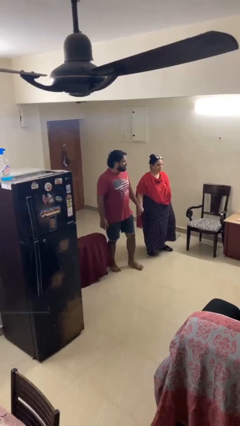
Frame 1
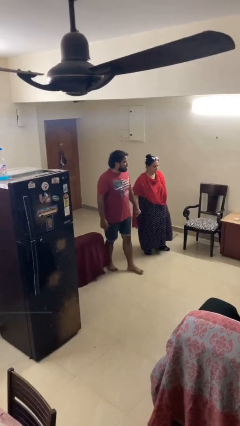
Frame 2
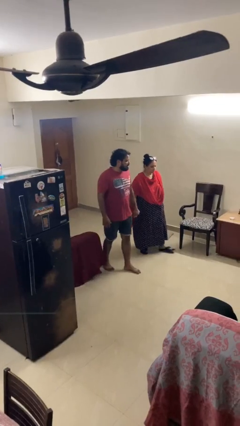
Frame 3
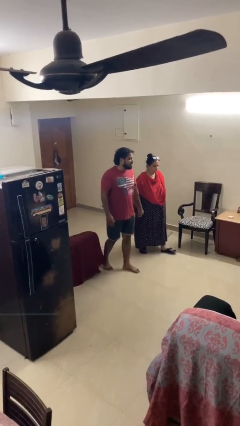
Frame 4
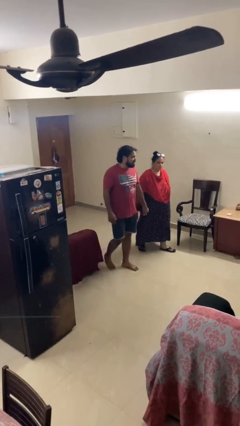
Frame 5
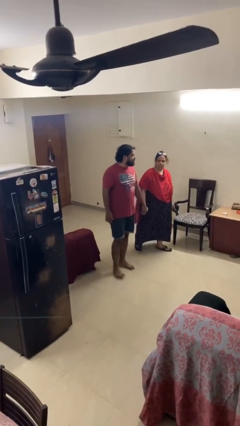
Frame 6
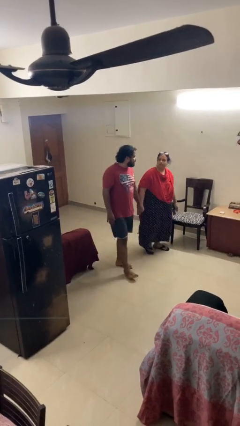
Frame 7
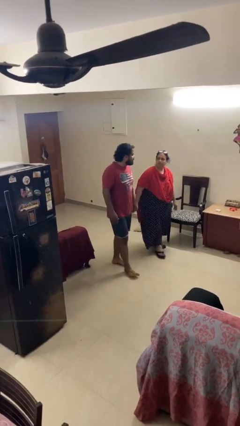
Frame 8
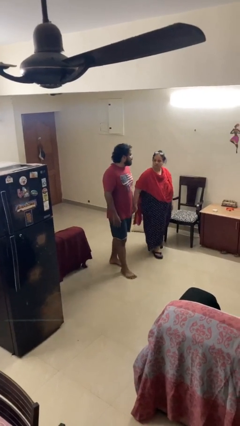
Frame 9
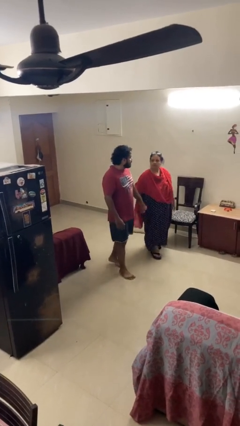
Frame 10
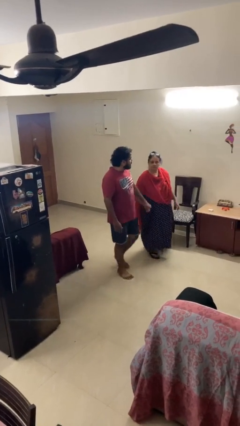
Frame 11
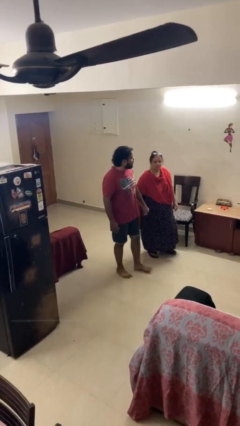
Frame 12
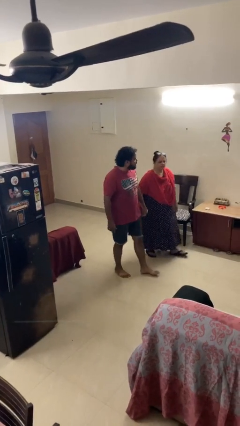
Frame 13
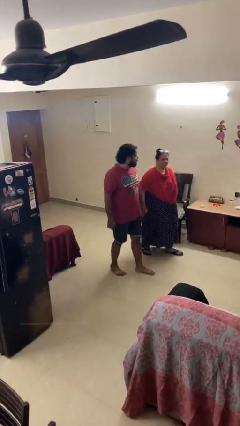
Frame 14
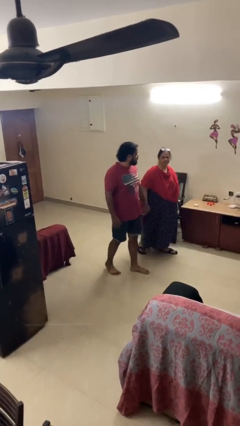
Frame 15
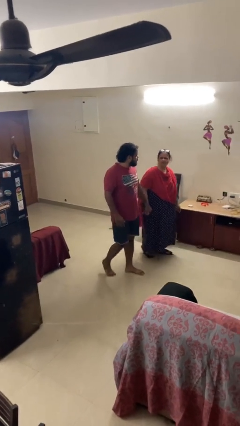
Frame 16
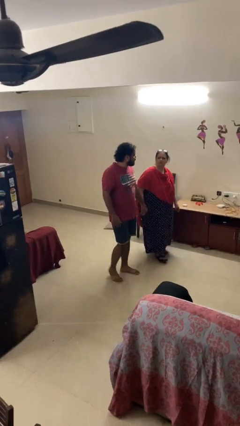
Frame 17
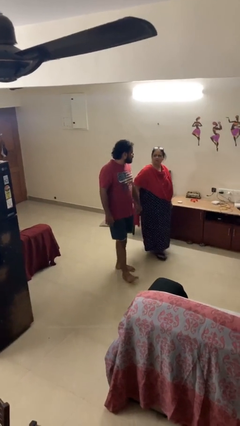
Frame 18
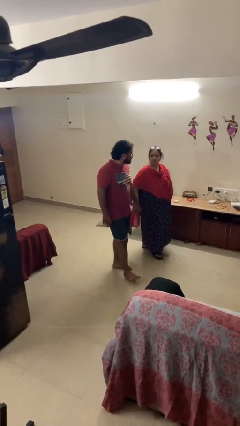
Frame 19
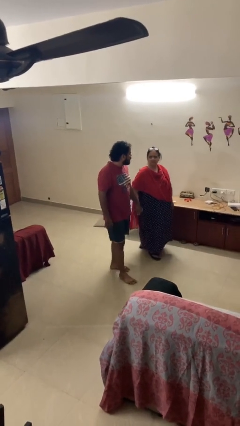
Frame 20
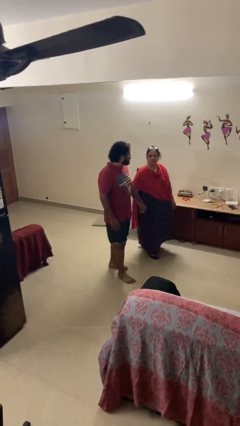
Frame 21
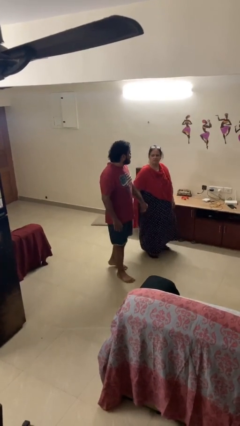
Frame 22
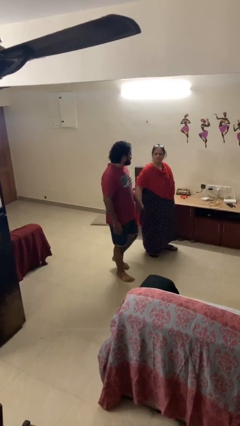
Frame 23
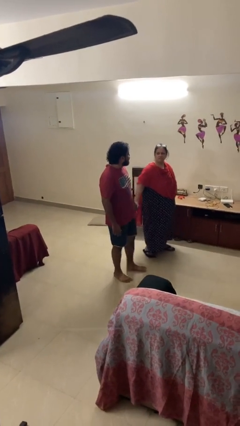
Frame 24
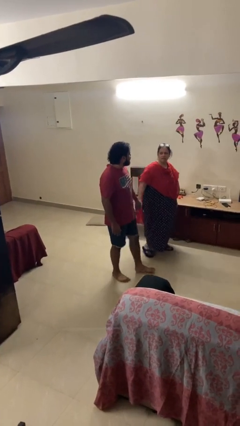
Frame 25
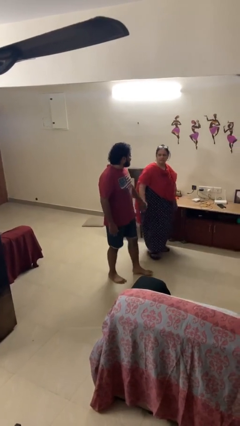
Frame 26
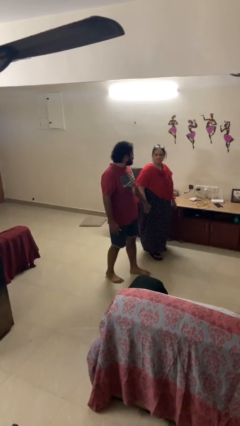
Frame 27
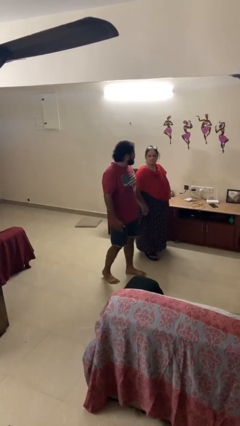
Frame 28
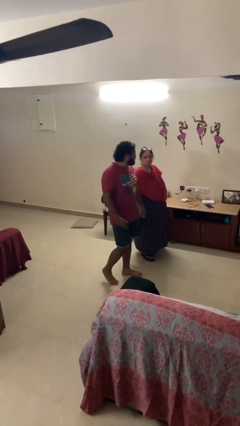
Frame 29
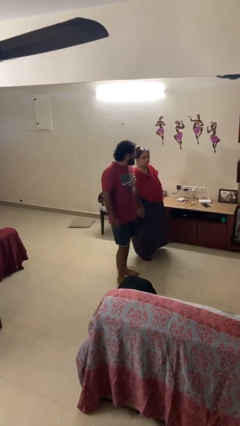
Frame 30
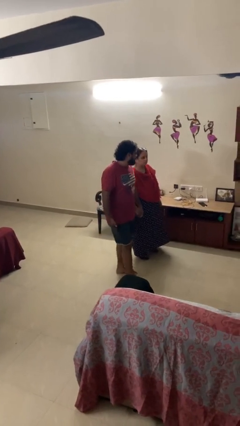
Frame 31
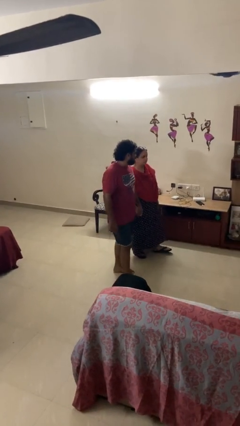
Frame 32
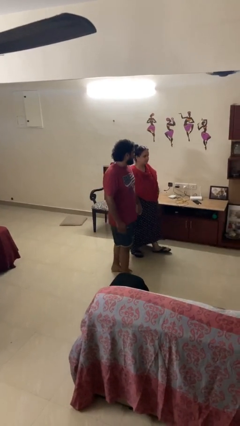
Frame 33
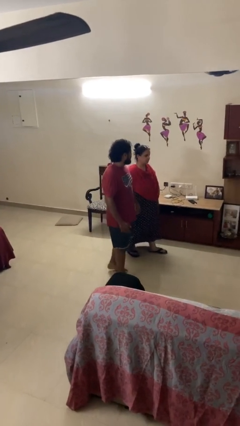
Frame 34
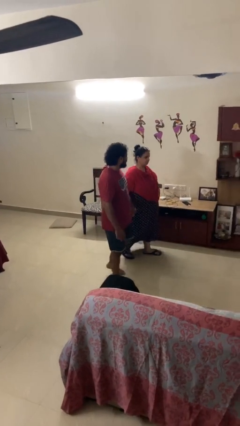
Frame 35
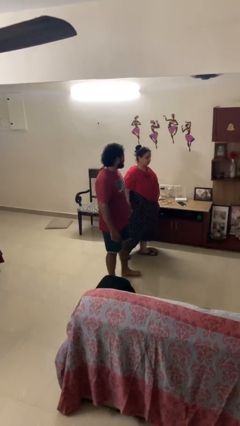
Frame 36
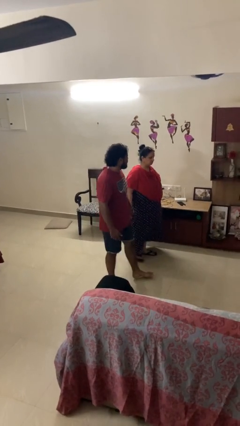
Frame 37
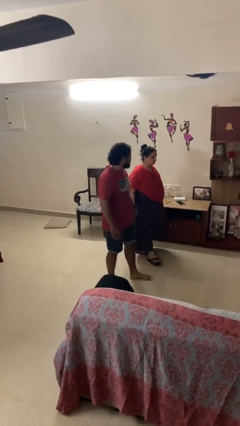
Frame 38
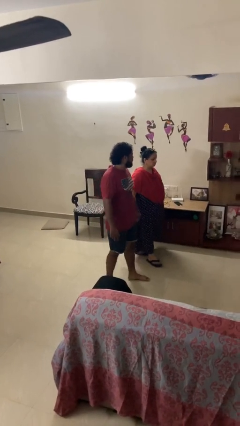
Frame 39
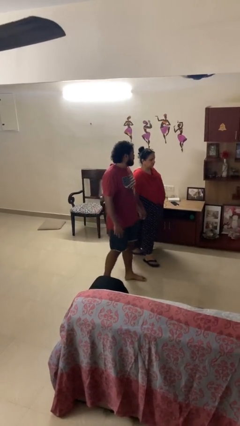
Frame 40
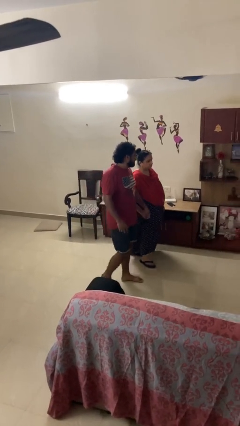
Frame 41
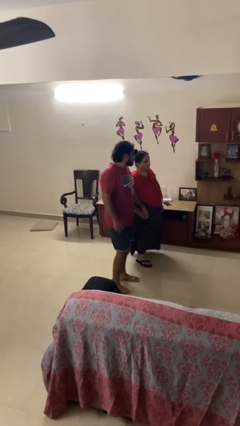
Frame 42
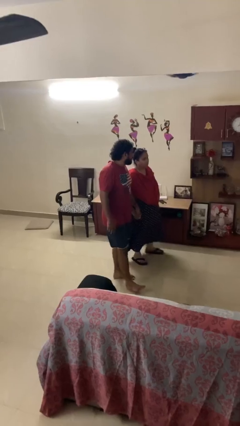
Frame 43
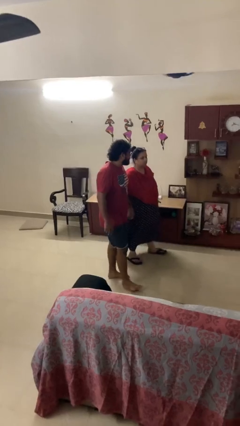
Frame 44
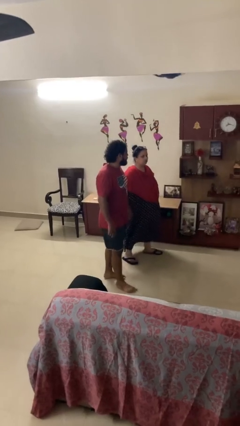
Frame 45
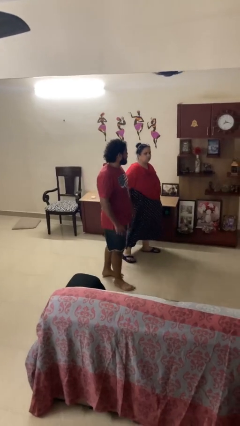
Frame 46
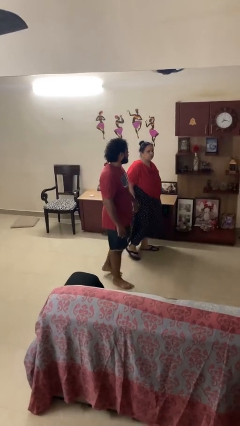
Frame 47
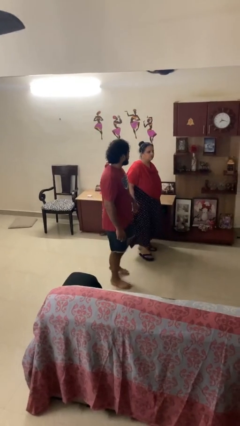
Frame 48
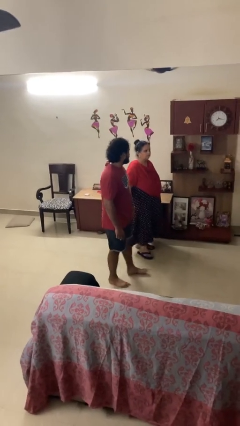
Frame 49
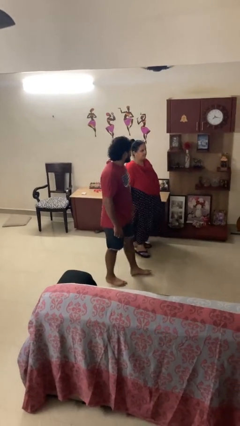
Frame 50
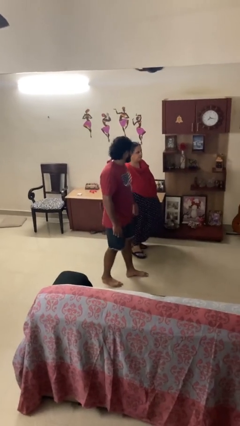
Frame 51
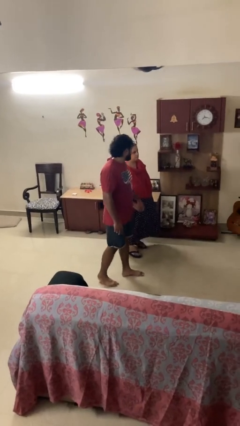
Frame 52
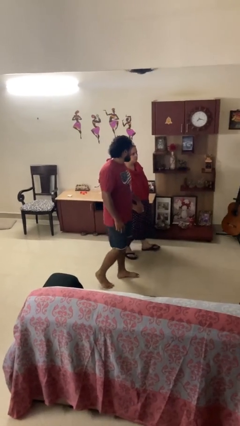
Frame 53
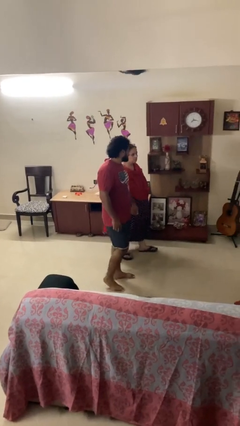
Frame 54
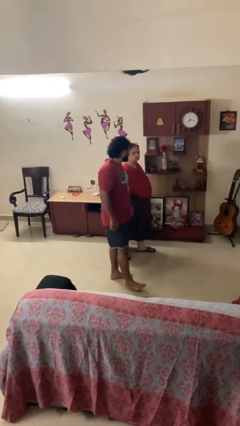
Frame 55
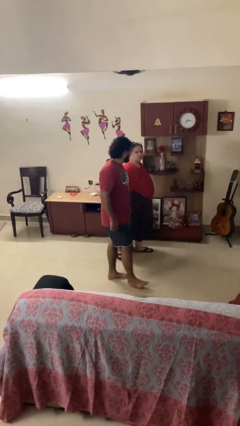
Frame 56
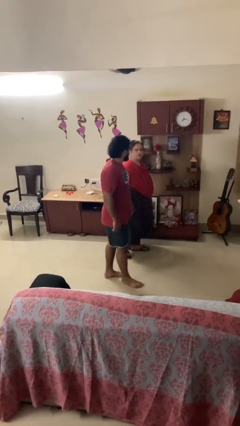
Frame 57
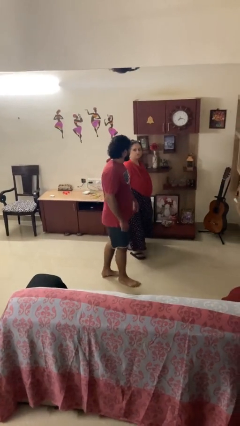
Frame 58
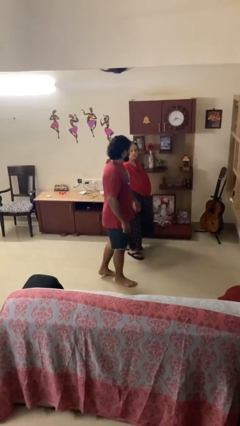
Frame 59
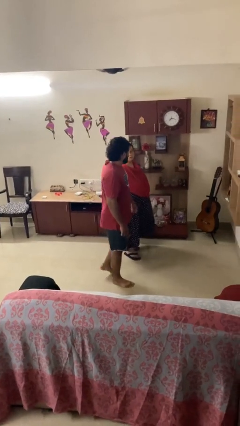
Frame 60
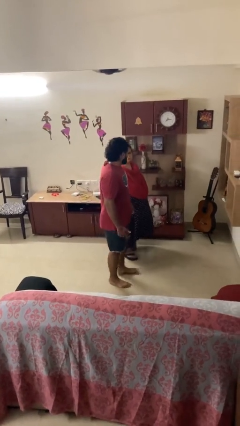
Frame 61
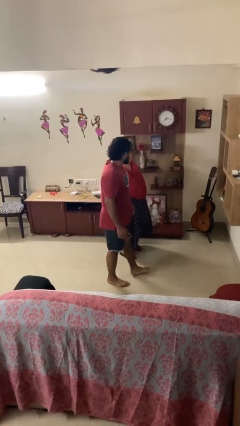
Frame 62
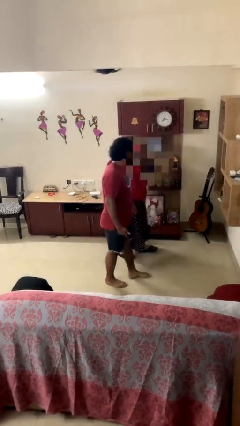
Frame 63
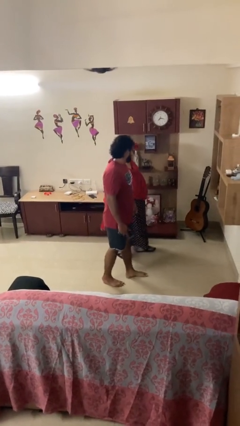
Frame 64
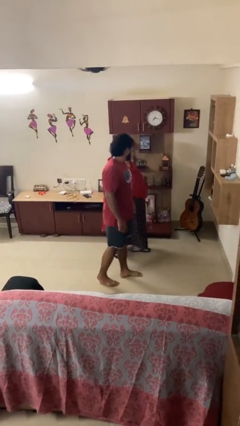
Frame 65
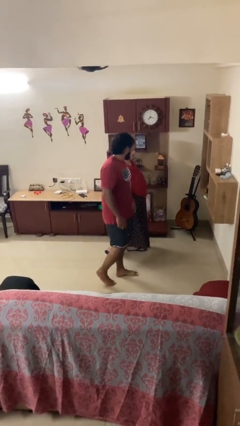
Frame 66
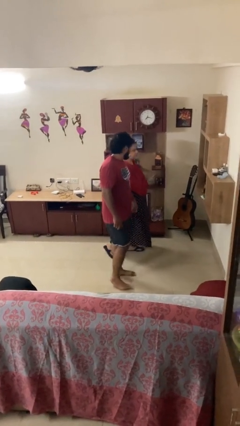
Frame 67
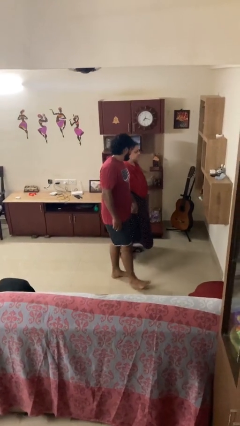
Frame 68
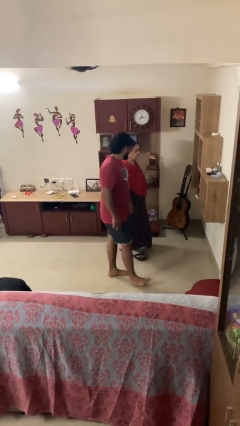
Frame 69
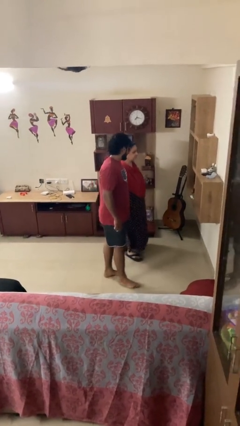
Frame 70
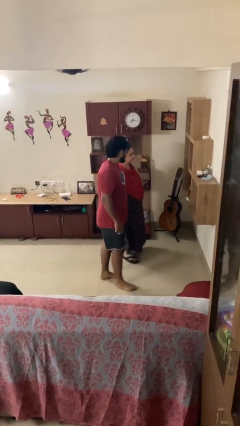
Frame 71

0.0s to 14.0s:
person holds hand

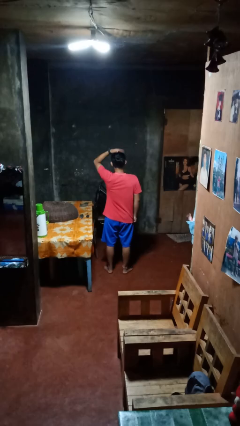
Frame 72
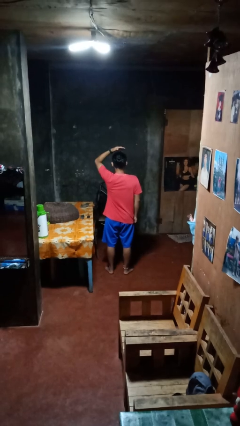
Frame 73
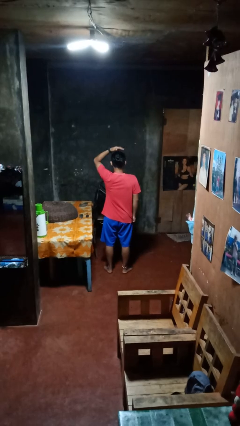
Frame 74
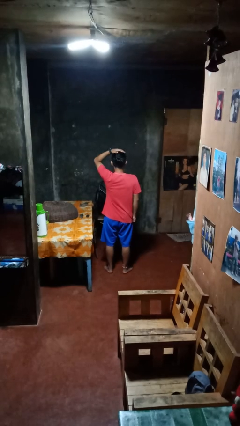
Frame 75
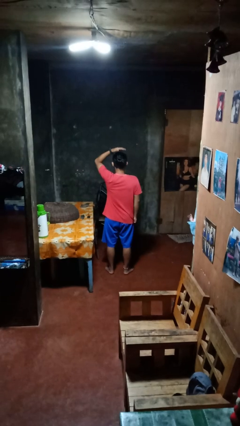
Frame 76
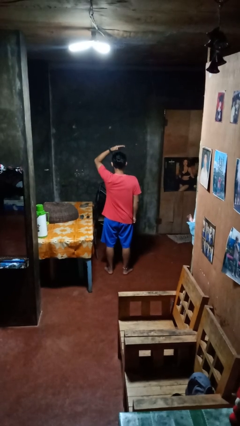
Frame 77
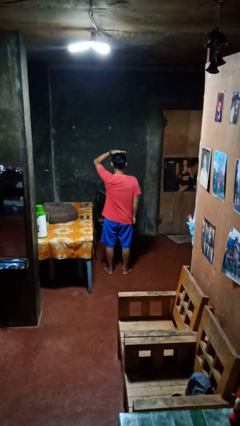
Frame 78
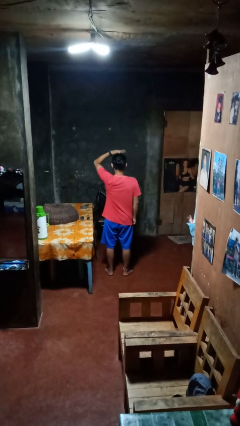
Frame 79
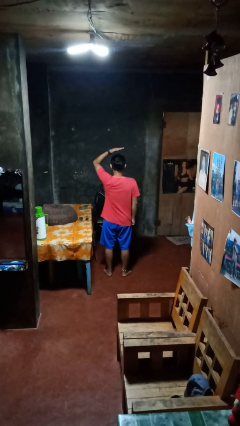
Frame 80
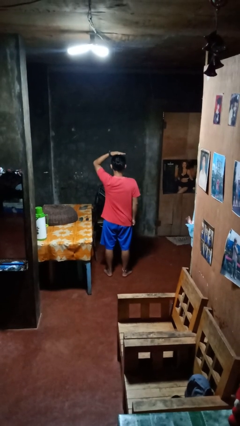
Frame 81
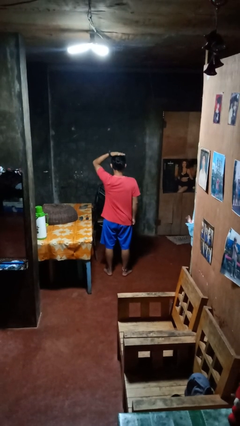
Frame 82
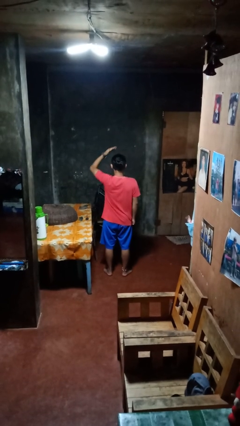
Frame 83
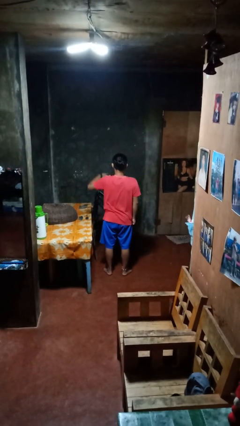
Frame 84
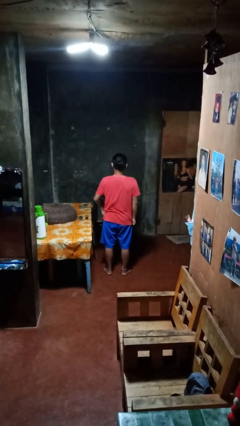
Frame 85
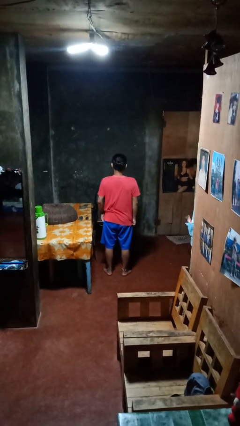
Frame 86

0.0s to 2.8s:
person pats head

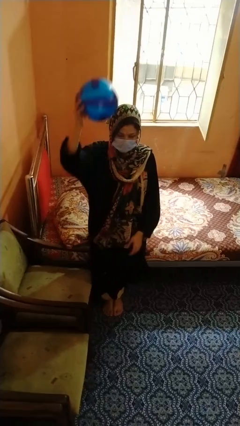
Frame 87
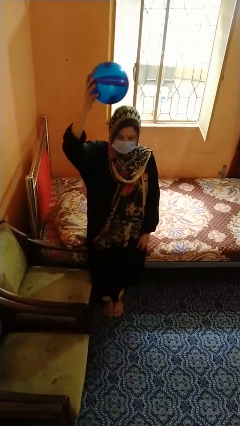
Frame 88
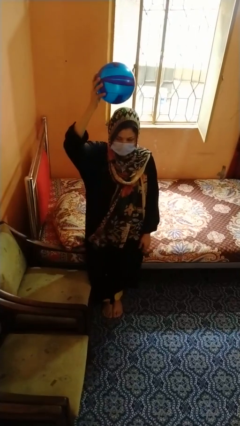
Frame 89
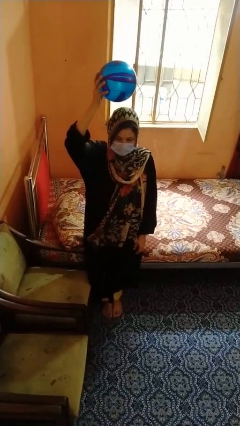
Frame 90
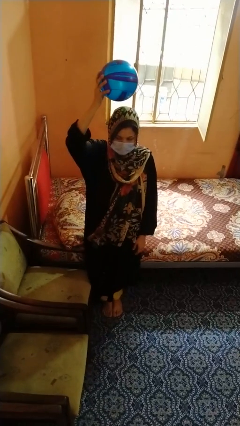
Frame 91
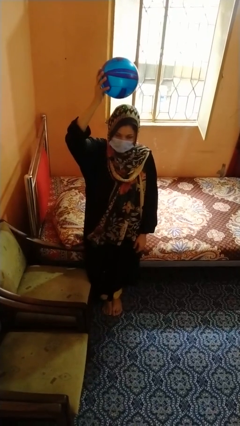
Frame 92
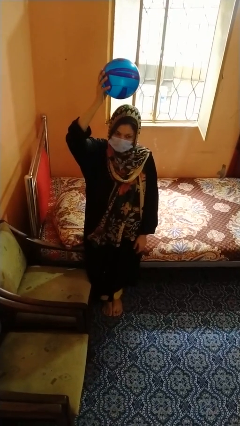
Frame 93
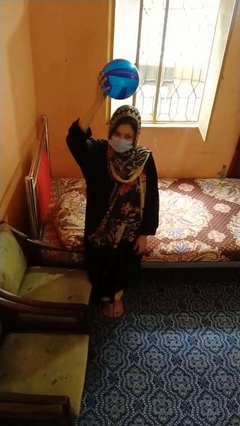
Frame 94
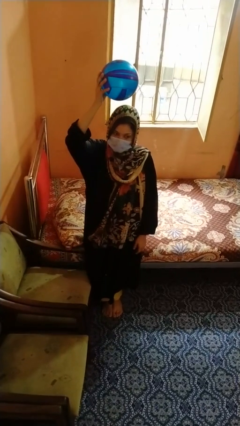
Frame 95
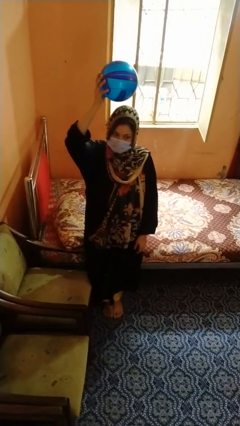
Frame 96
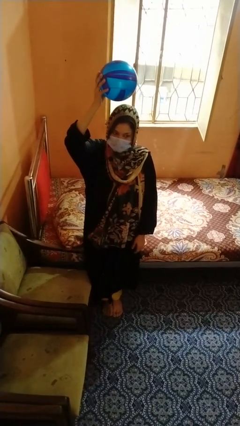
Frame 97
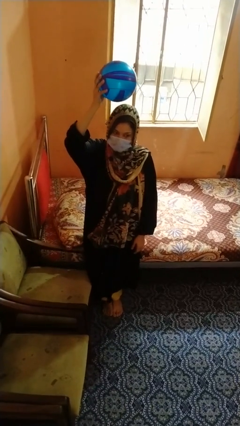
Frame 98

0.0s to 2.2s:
person holds object above head
